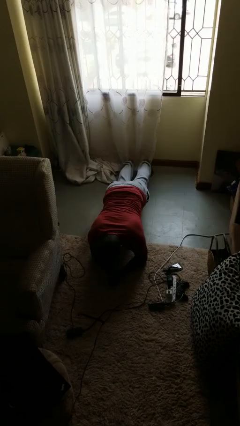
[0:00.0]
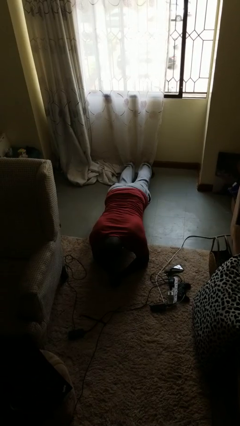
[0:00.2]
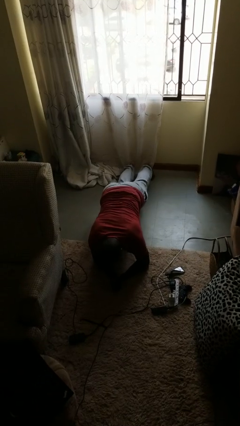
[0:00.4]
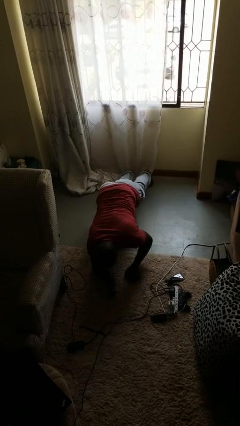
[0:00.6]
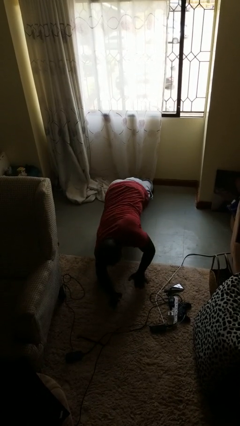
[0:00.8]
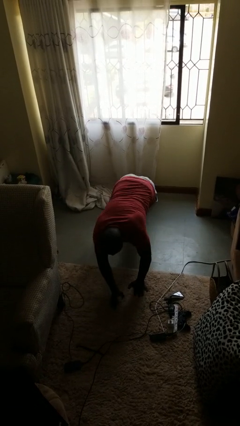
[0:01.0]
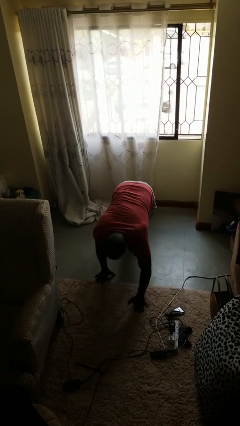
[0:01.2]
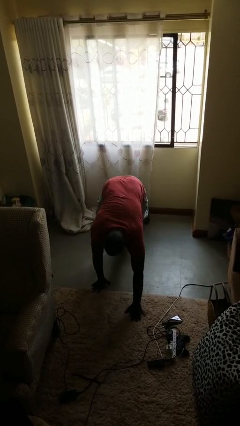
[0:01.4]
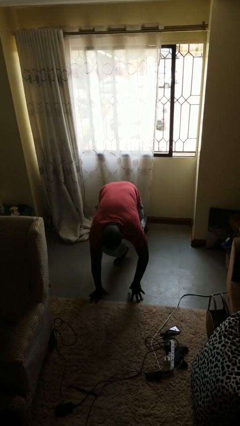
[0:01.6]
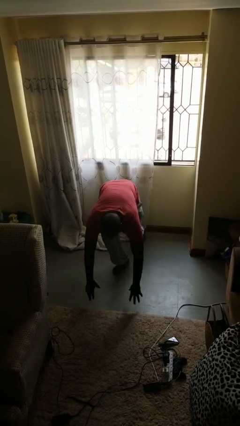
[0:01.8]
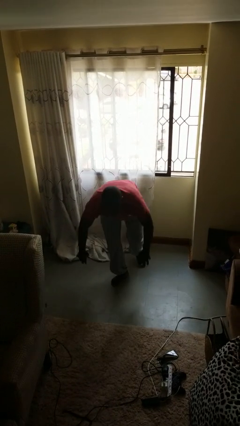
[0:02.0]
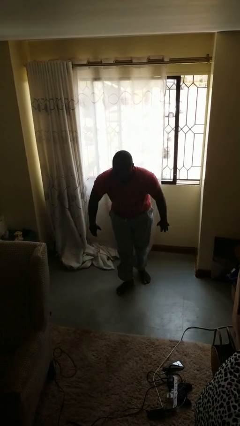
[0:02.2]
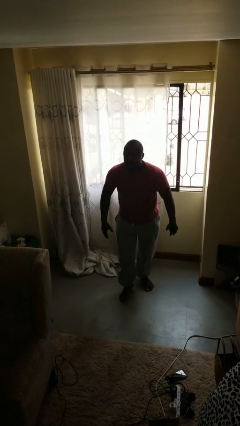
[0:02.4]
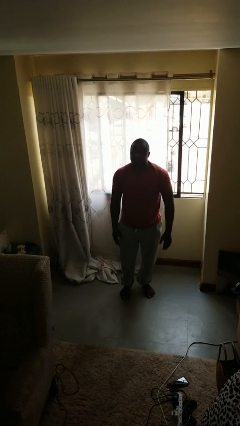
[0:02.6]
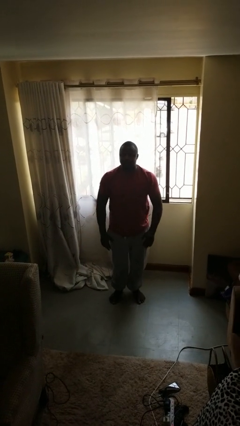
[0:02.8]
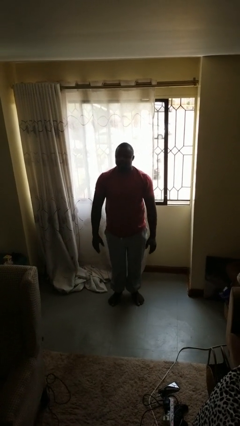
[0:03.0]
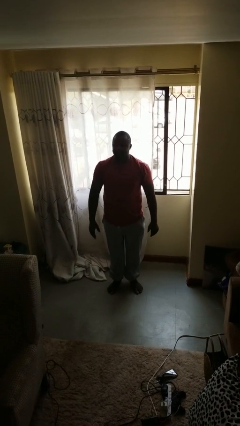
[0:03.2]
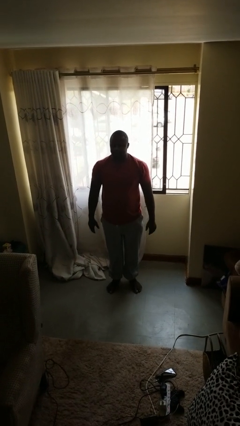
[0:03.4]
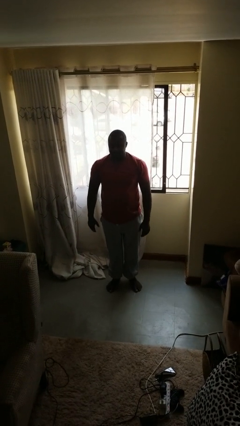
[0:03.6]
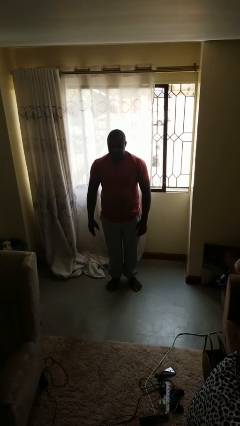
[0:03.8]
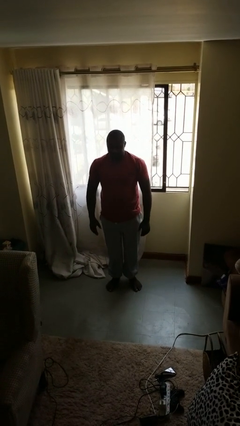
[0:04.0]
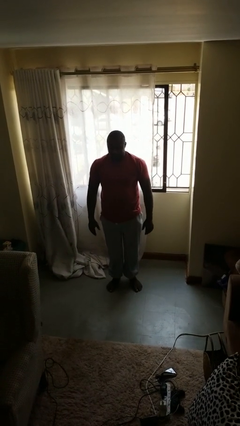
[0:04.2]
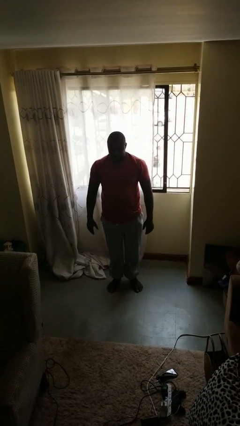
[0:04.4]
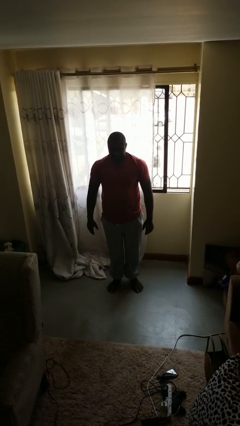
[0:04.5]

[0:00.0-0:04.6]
person stands up from floor

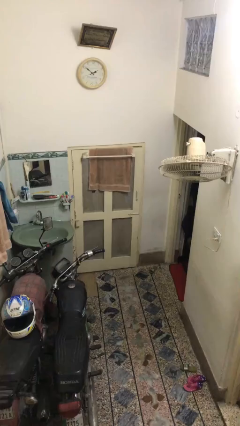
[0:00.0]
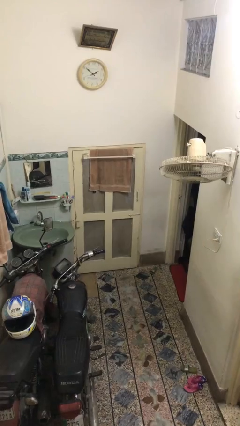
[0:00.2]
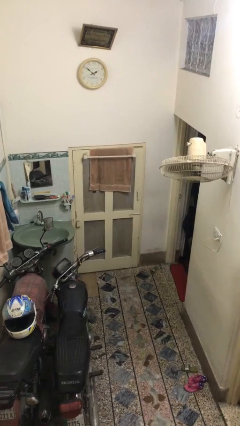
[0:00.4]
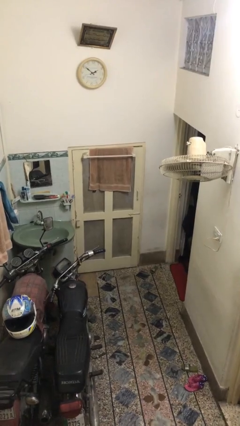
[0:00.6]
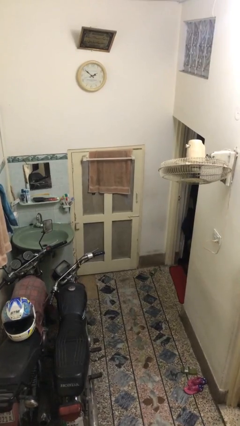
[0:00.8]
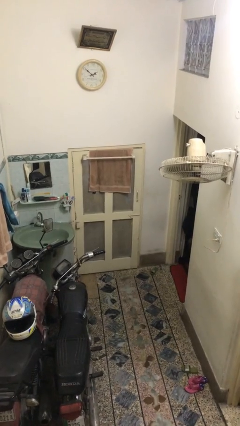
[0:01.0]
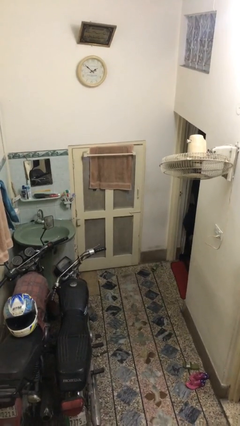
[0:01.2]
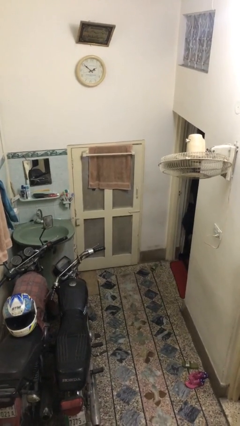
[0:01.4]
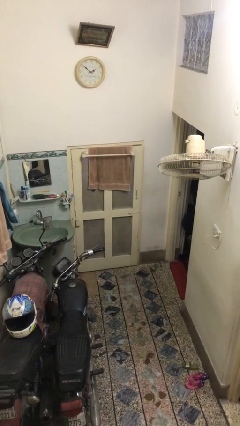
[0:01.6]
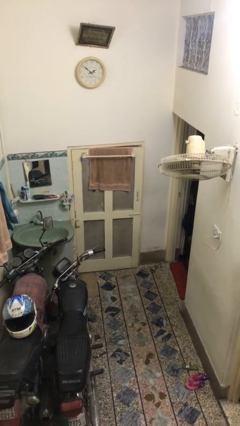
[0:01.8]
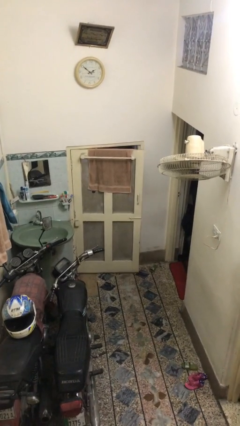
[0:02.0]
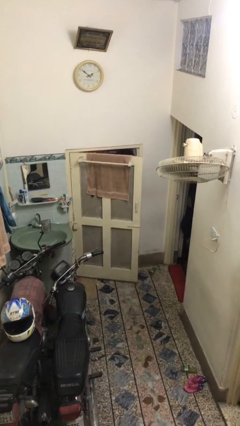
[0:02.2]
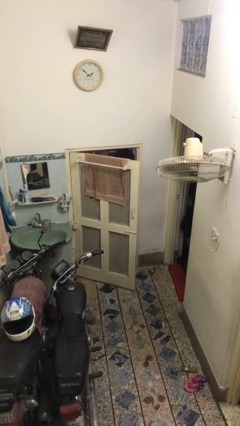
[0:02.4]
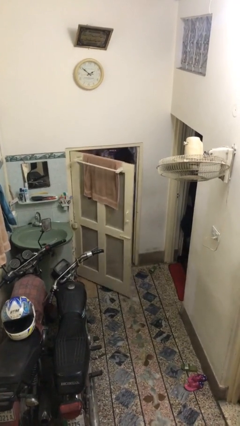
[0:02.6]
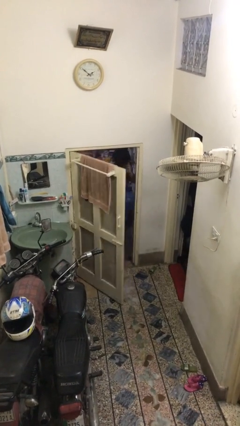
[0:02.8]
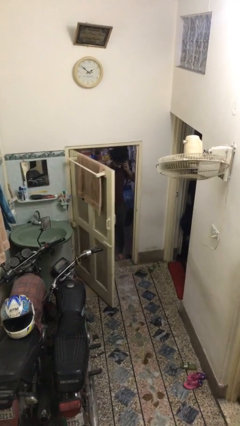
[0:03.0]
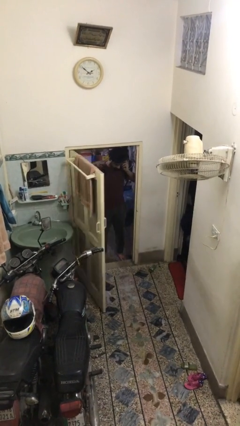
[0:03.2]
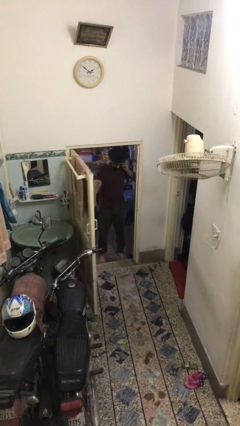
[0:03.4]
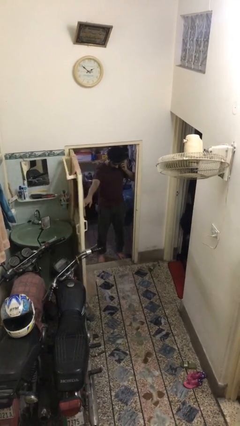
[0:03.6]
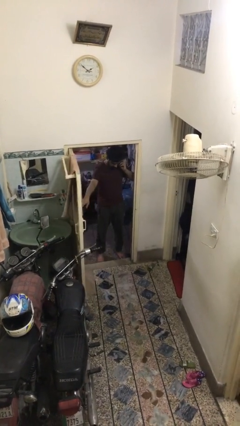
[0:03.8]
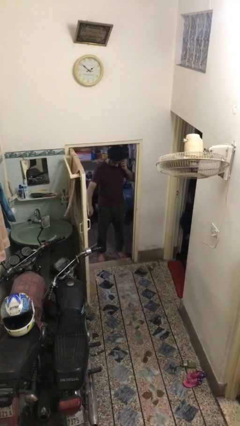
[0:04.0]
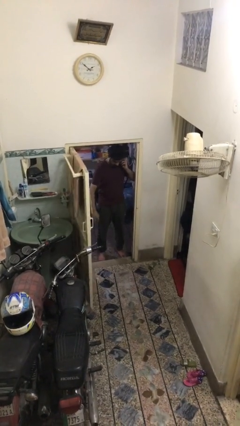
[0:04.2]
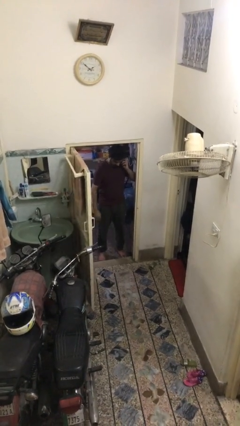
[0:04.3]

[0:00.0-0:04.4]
person opens facility door

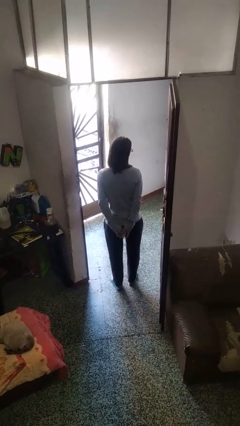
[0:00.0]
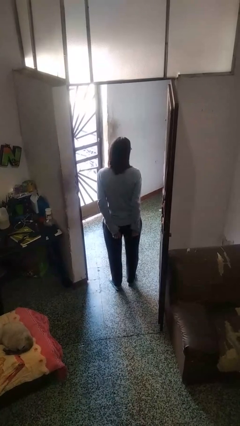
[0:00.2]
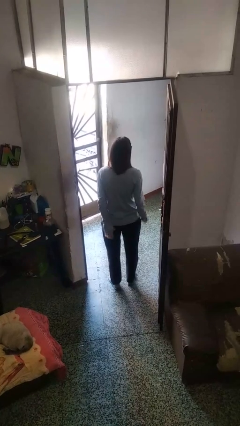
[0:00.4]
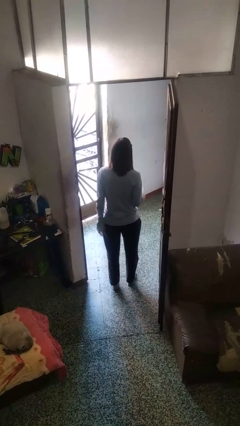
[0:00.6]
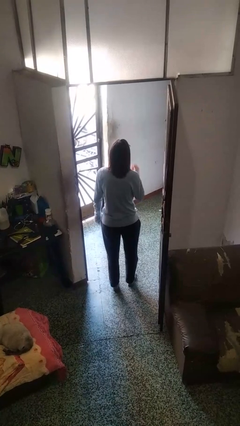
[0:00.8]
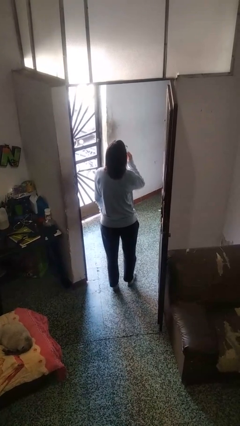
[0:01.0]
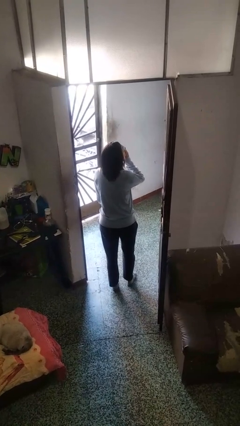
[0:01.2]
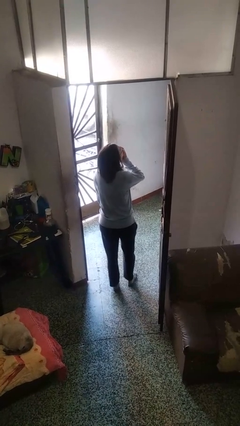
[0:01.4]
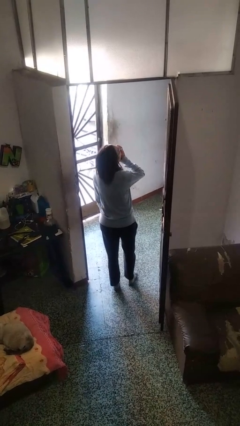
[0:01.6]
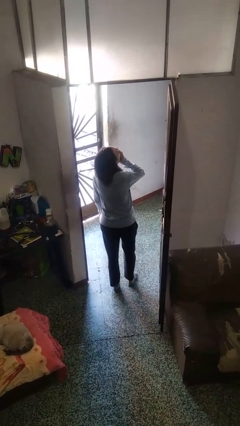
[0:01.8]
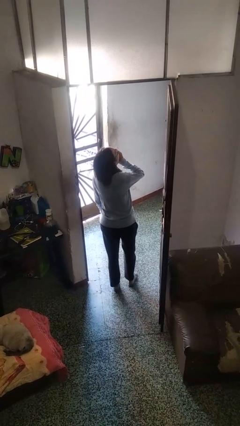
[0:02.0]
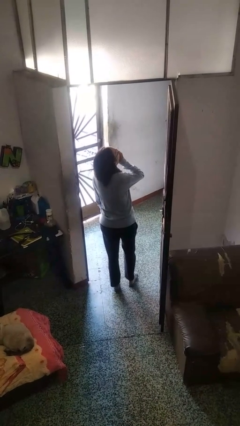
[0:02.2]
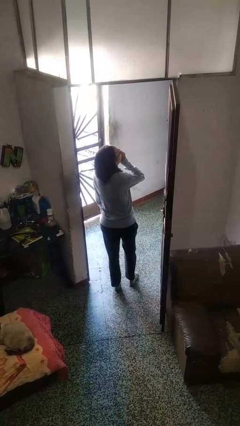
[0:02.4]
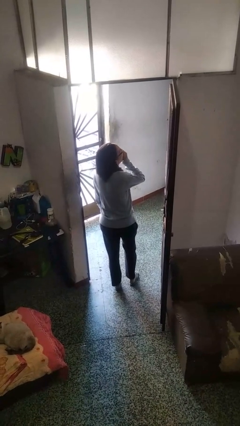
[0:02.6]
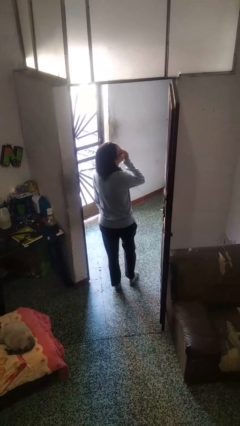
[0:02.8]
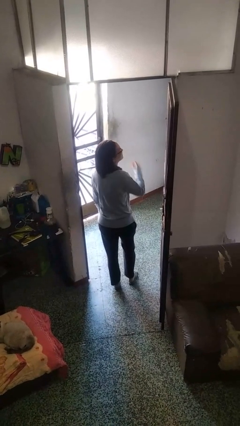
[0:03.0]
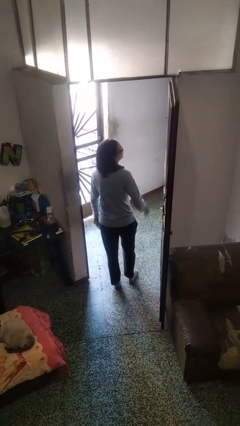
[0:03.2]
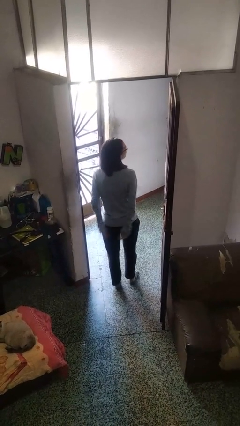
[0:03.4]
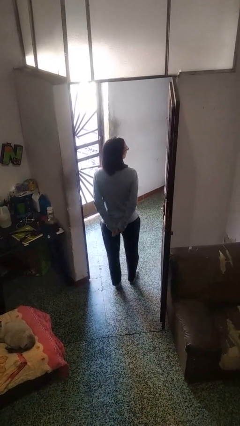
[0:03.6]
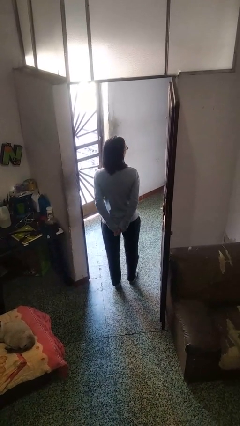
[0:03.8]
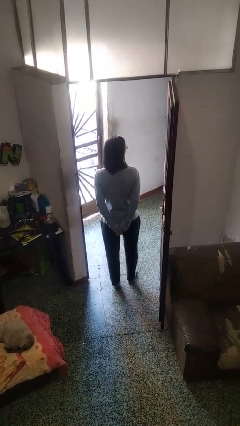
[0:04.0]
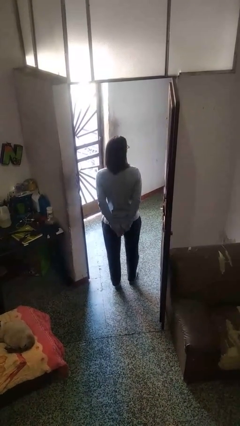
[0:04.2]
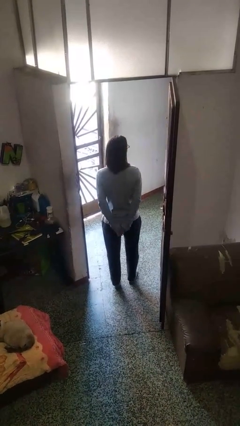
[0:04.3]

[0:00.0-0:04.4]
person yawns

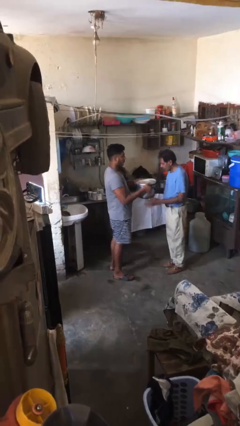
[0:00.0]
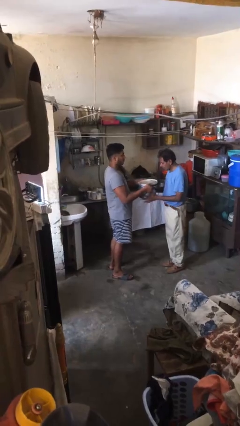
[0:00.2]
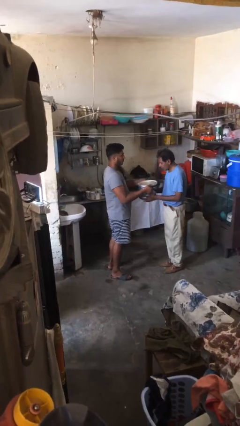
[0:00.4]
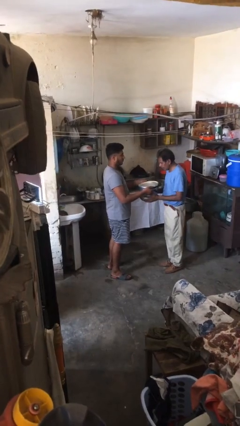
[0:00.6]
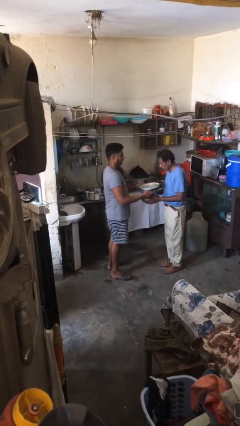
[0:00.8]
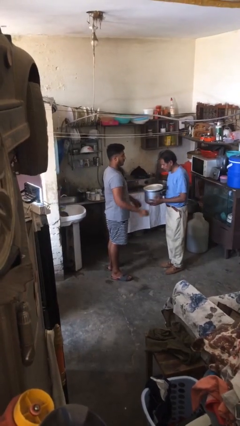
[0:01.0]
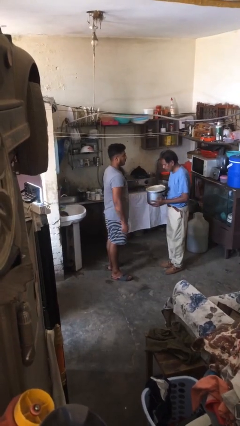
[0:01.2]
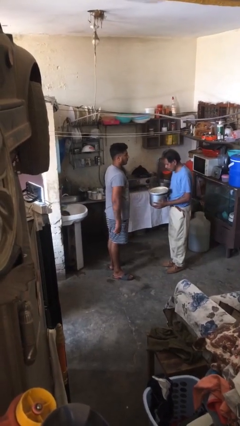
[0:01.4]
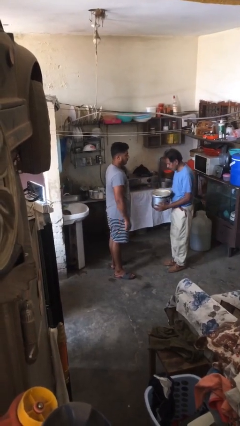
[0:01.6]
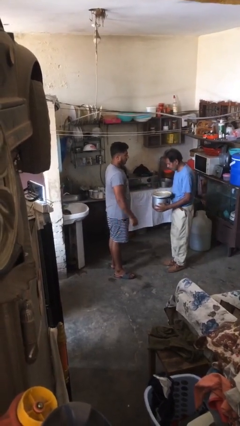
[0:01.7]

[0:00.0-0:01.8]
person transfers object to person

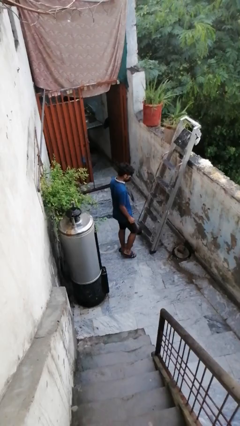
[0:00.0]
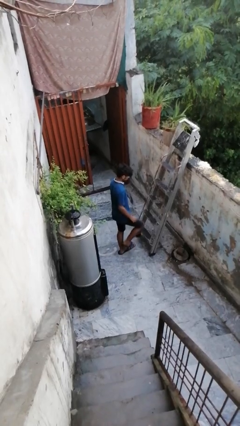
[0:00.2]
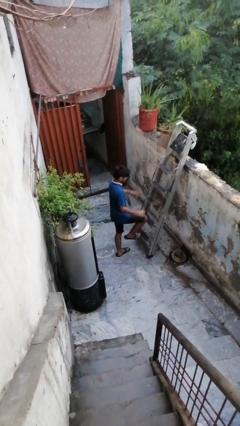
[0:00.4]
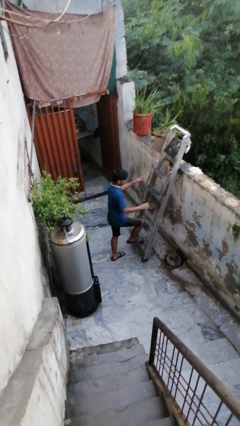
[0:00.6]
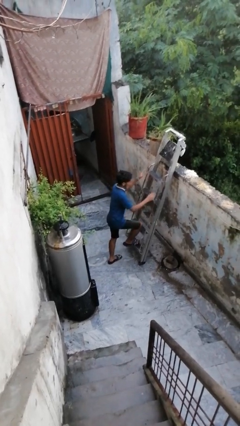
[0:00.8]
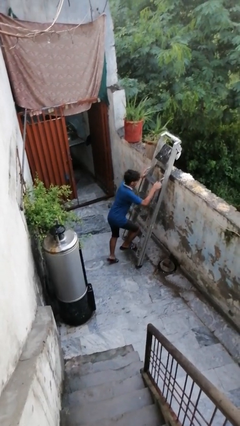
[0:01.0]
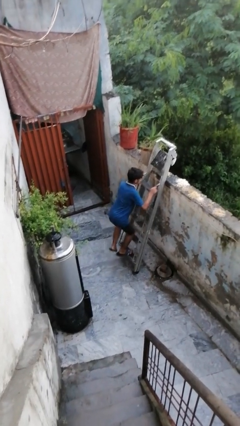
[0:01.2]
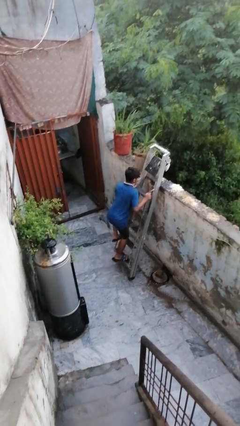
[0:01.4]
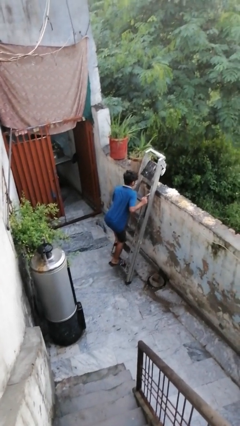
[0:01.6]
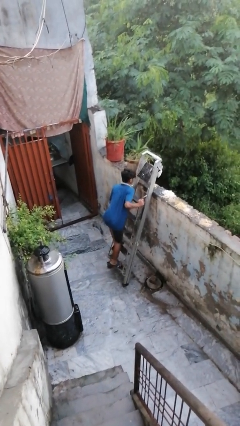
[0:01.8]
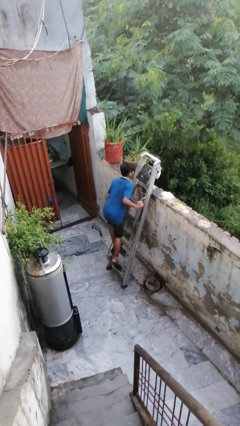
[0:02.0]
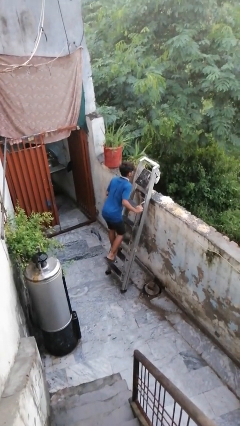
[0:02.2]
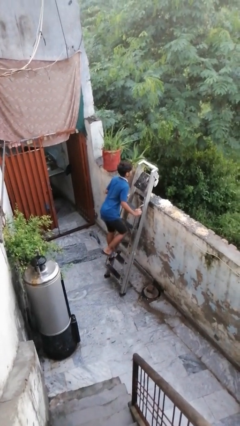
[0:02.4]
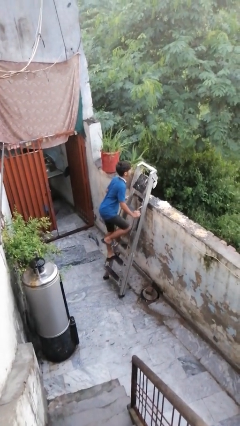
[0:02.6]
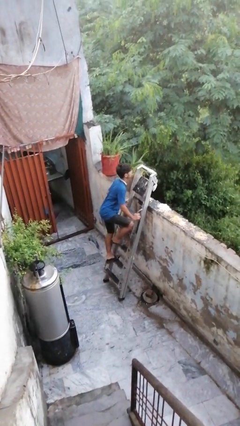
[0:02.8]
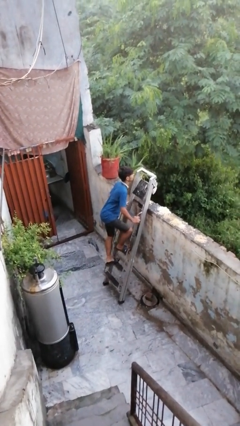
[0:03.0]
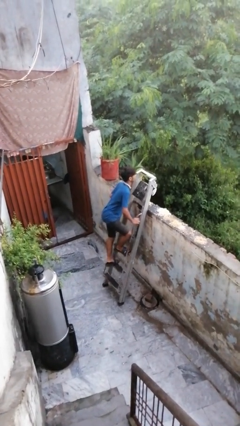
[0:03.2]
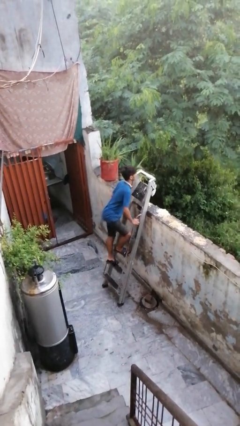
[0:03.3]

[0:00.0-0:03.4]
person climbs up ladder
